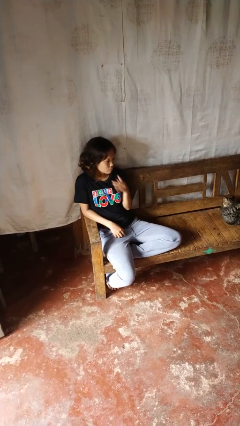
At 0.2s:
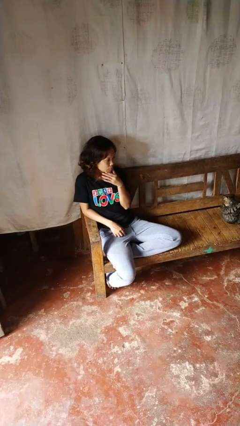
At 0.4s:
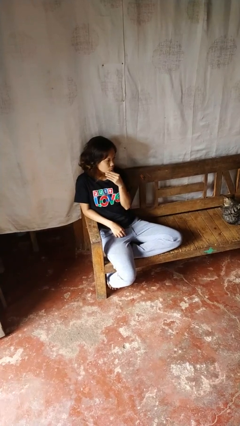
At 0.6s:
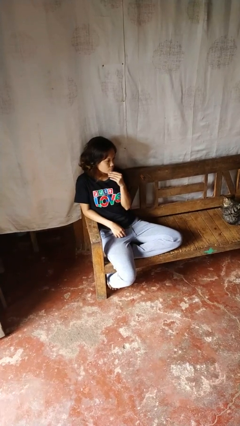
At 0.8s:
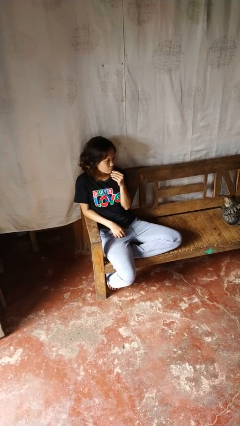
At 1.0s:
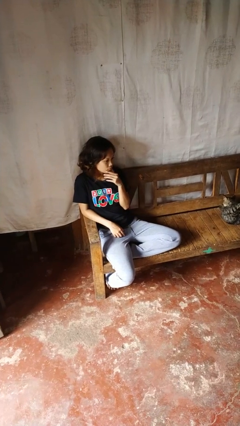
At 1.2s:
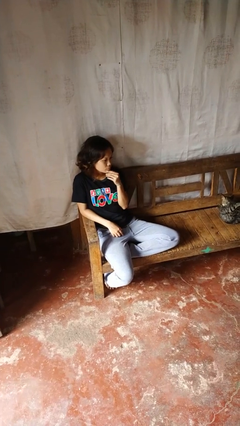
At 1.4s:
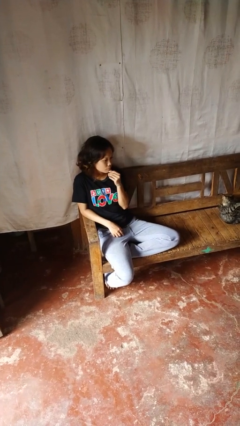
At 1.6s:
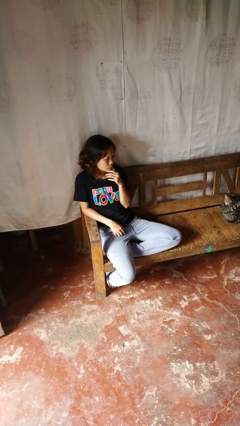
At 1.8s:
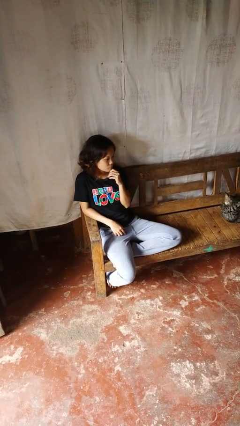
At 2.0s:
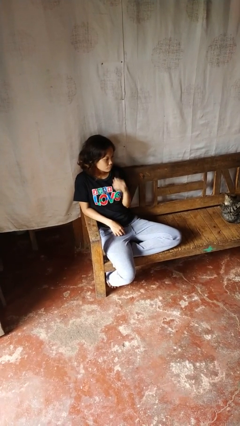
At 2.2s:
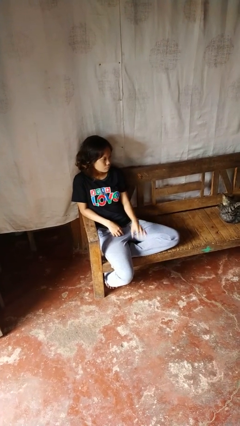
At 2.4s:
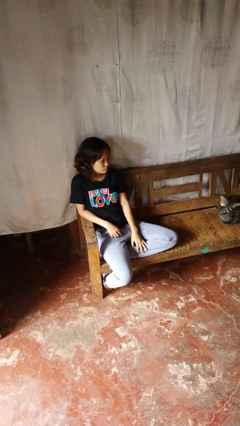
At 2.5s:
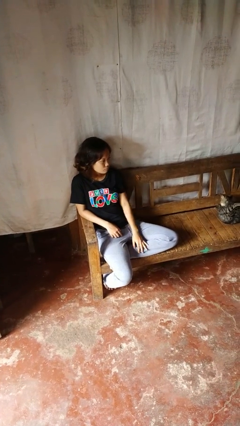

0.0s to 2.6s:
person strokes chin

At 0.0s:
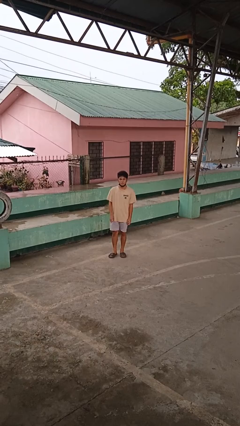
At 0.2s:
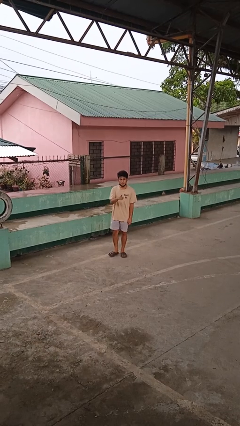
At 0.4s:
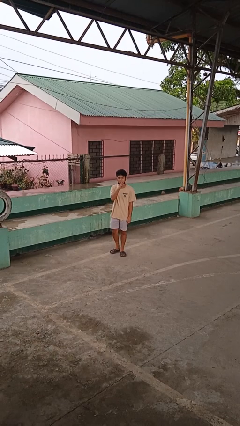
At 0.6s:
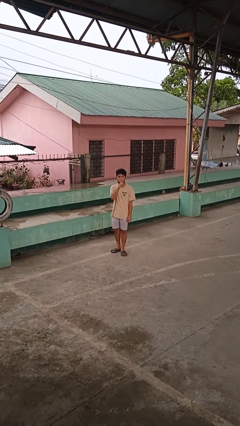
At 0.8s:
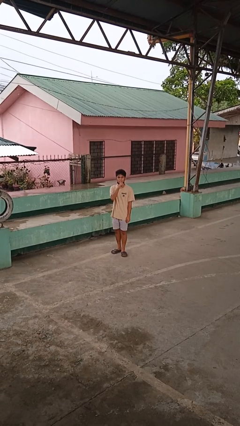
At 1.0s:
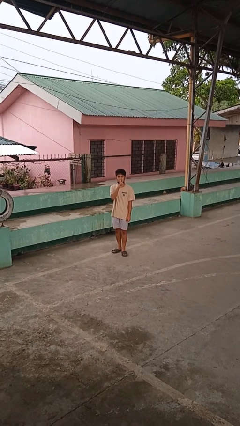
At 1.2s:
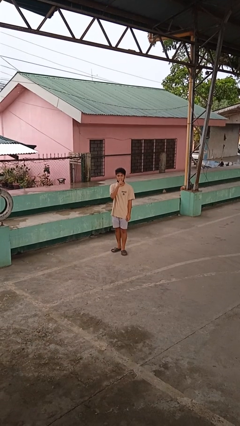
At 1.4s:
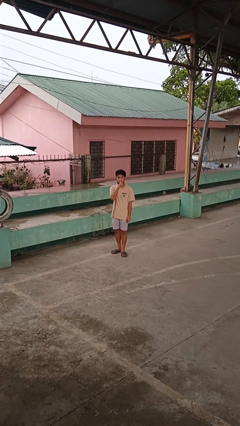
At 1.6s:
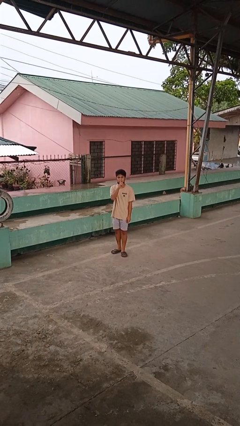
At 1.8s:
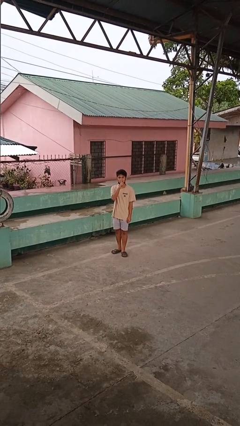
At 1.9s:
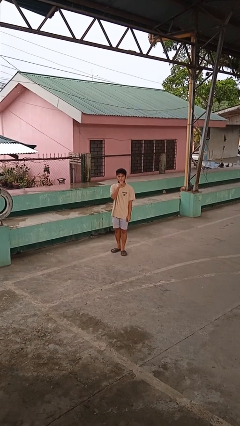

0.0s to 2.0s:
person gestures be quiet

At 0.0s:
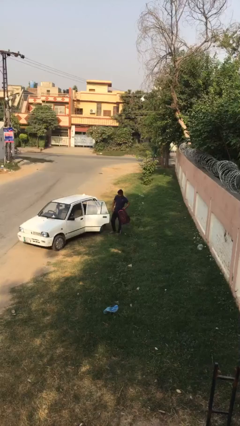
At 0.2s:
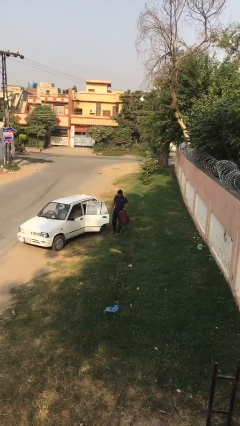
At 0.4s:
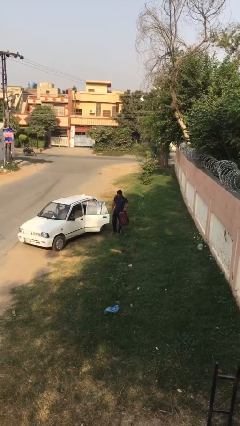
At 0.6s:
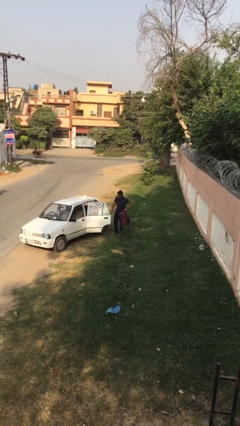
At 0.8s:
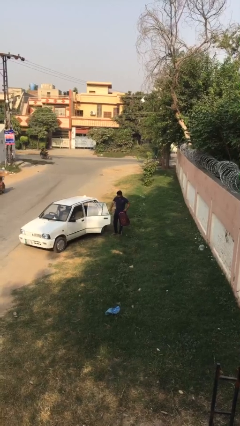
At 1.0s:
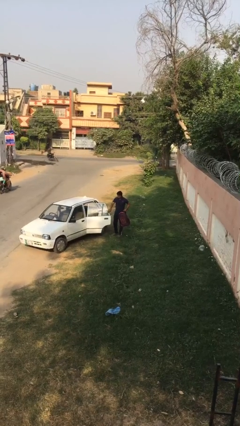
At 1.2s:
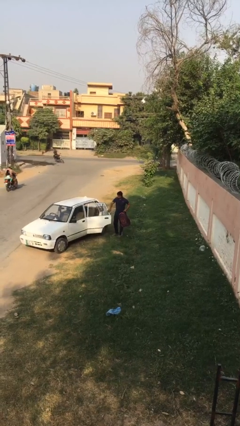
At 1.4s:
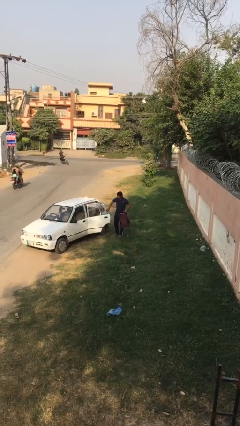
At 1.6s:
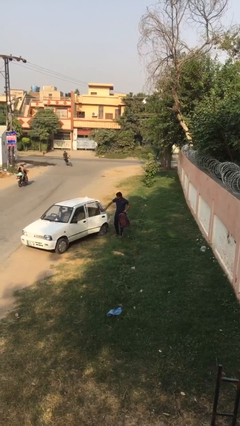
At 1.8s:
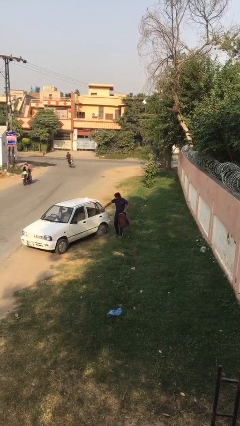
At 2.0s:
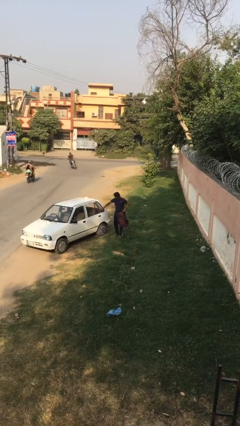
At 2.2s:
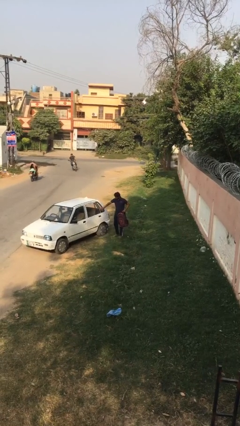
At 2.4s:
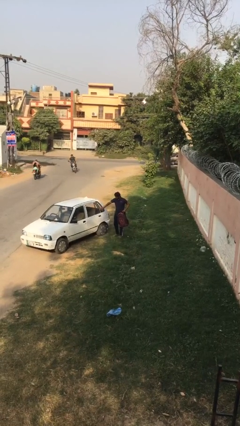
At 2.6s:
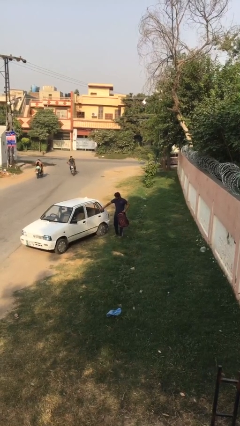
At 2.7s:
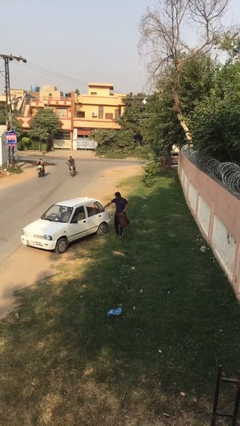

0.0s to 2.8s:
person closes car door

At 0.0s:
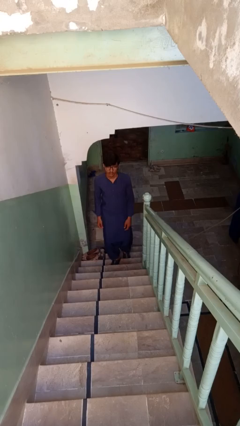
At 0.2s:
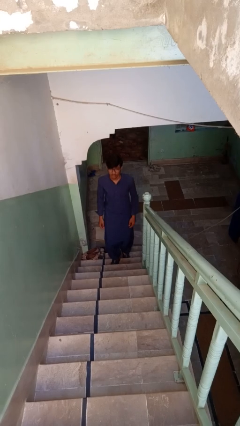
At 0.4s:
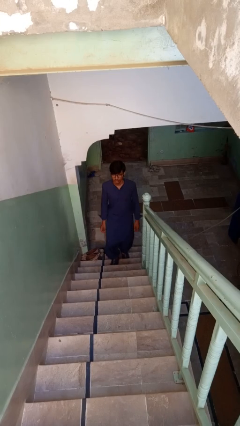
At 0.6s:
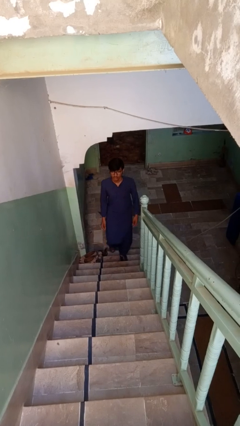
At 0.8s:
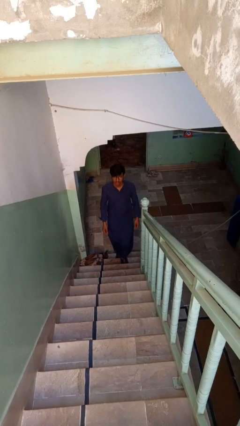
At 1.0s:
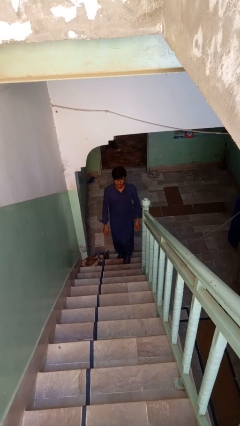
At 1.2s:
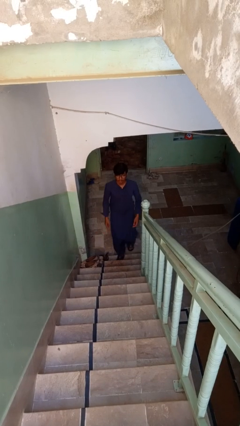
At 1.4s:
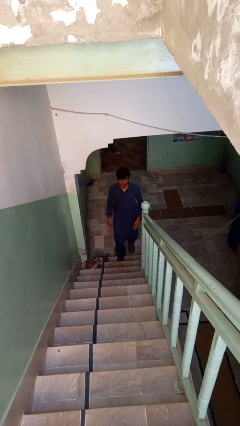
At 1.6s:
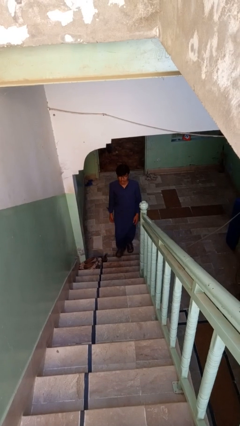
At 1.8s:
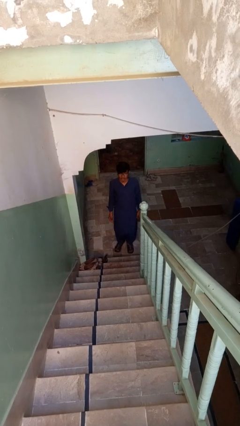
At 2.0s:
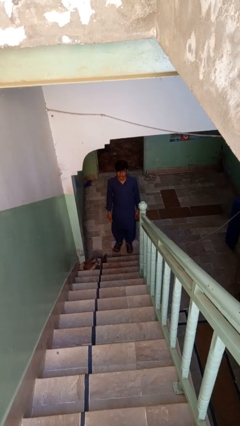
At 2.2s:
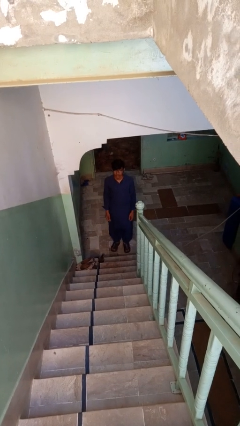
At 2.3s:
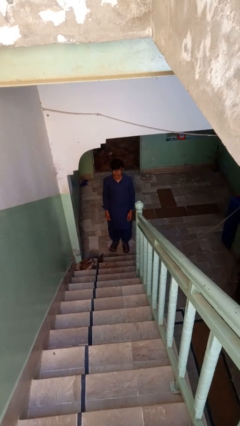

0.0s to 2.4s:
person climbs down stairs

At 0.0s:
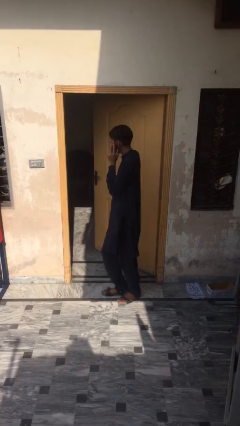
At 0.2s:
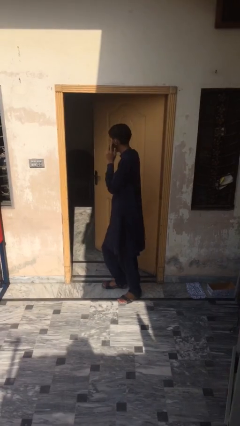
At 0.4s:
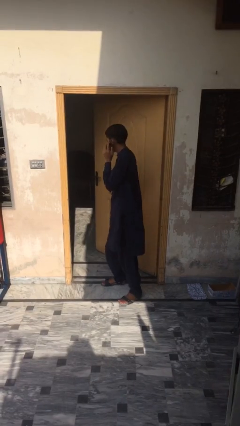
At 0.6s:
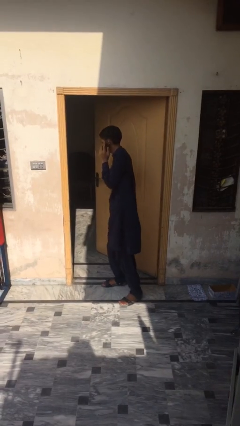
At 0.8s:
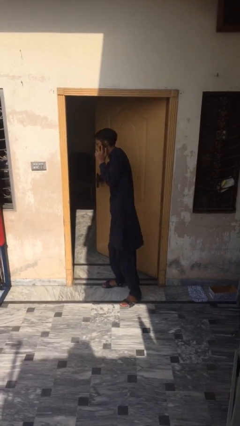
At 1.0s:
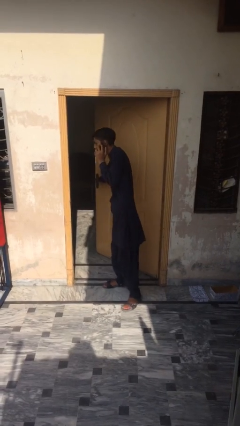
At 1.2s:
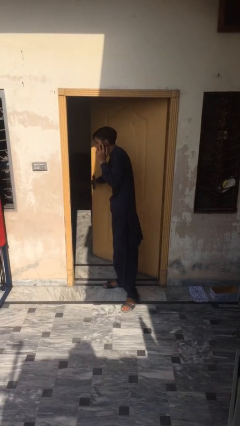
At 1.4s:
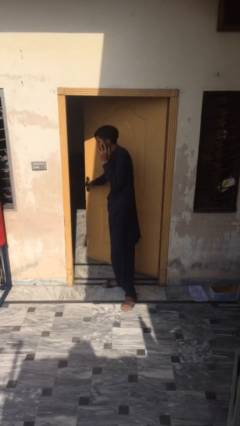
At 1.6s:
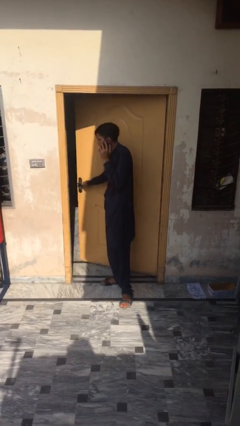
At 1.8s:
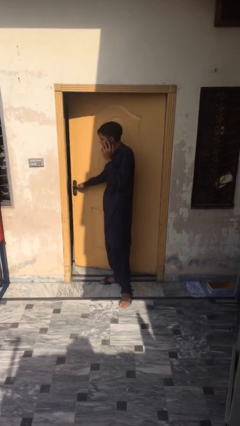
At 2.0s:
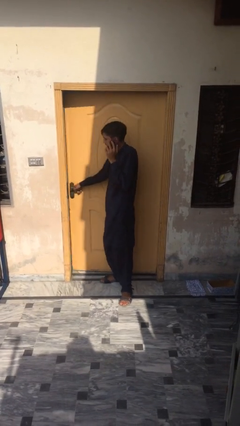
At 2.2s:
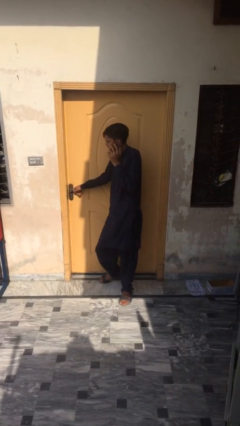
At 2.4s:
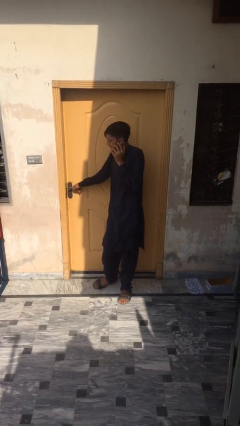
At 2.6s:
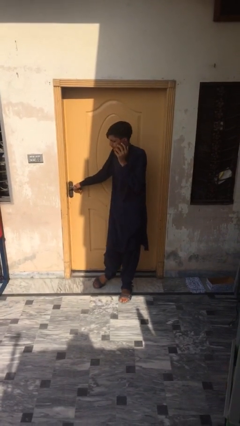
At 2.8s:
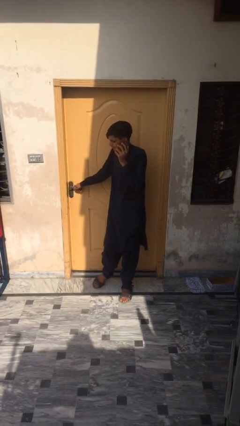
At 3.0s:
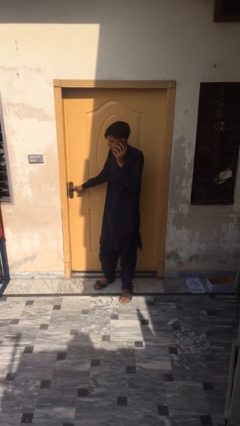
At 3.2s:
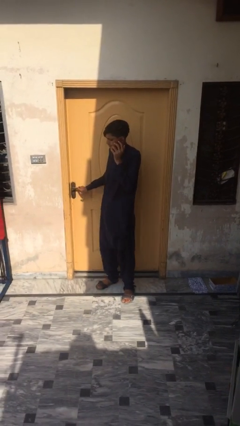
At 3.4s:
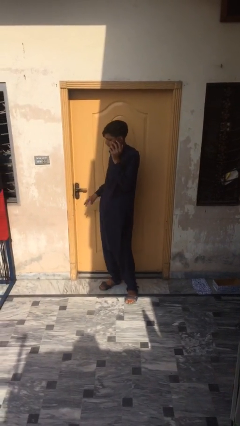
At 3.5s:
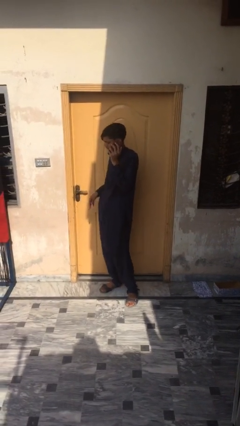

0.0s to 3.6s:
person closes facility door

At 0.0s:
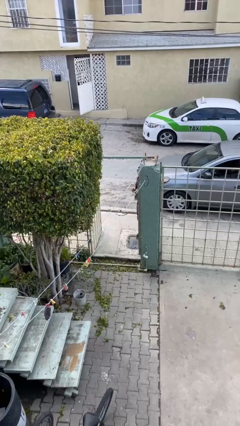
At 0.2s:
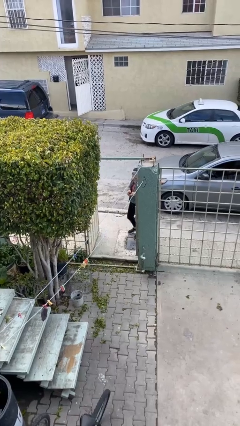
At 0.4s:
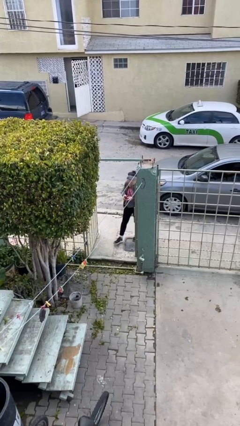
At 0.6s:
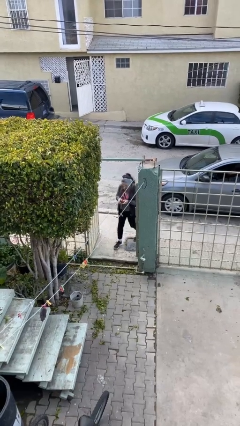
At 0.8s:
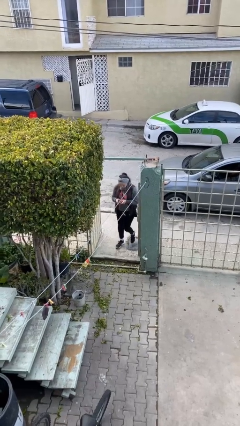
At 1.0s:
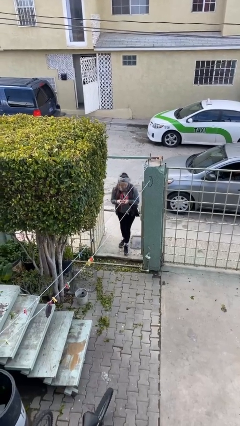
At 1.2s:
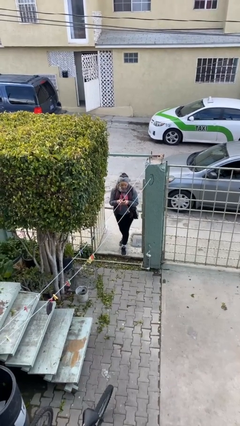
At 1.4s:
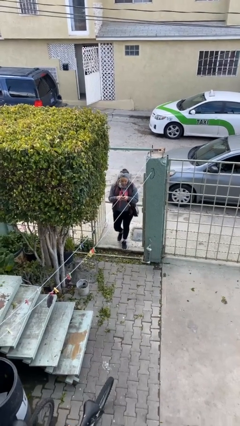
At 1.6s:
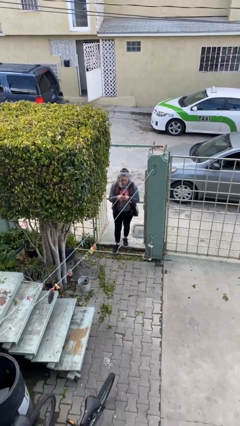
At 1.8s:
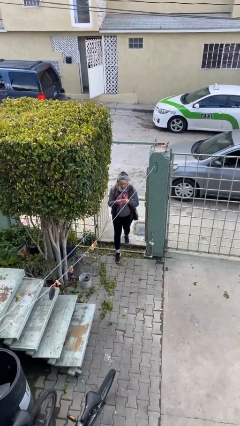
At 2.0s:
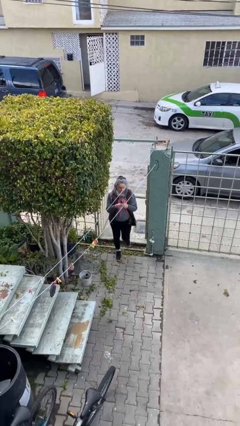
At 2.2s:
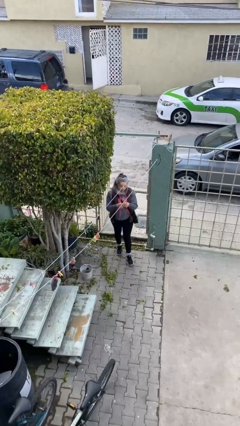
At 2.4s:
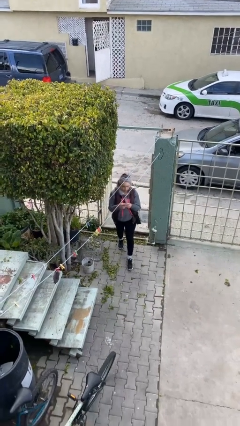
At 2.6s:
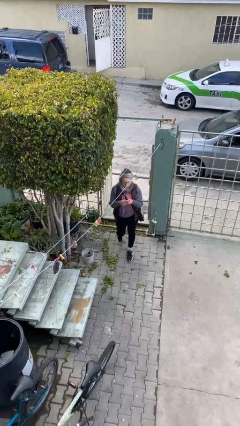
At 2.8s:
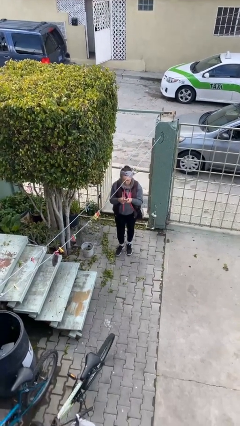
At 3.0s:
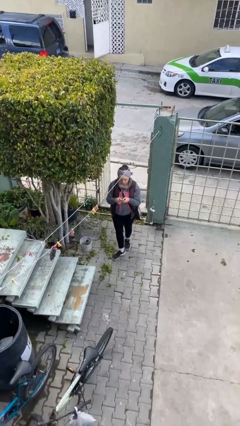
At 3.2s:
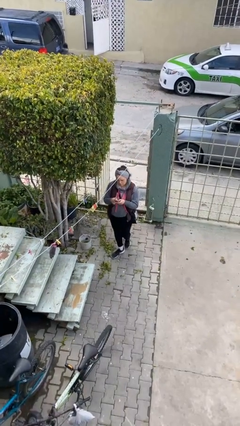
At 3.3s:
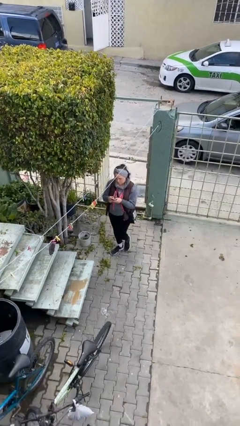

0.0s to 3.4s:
person enters scene through structure

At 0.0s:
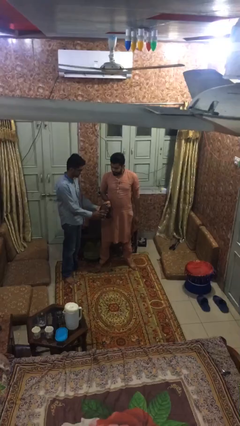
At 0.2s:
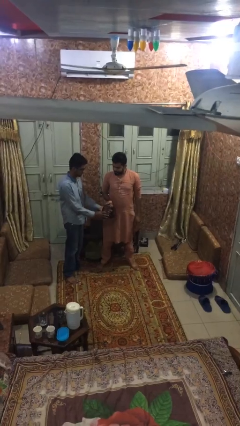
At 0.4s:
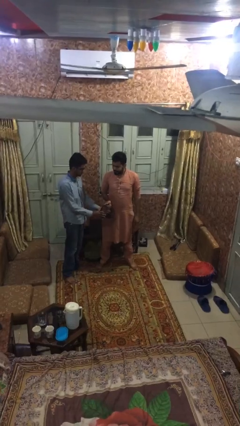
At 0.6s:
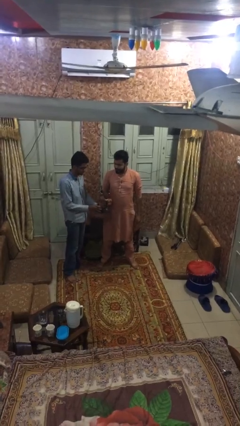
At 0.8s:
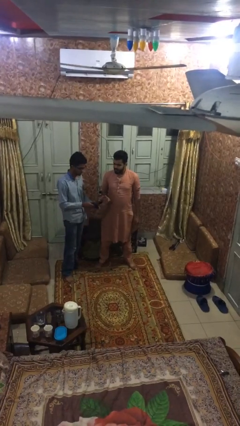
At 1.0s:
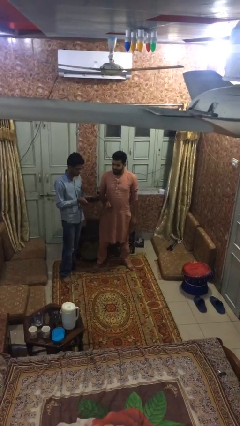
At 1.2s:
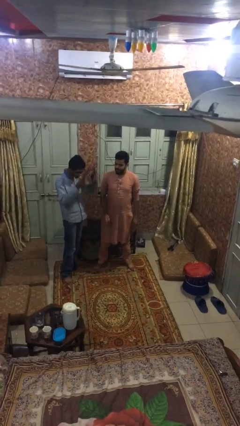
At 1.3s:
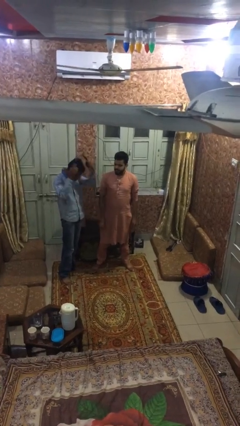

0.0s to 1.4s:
person transfers object to person
